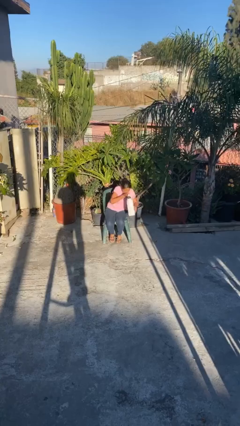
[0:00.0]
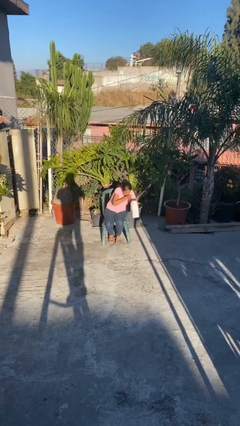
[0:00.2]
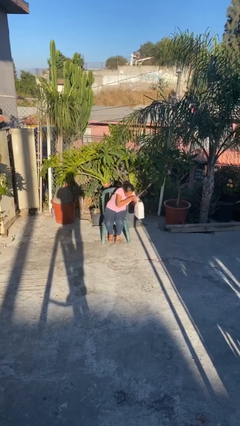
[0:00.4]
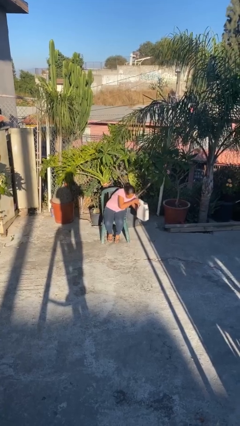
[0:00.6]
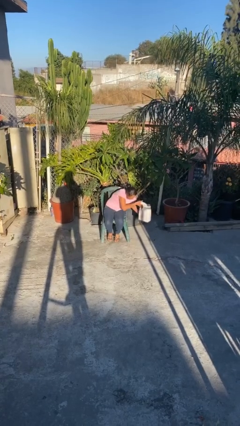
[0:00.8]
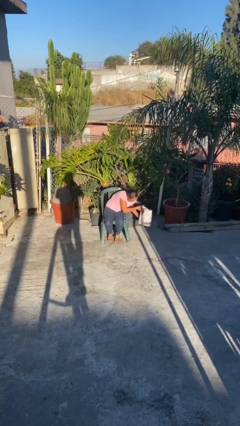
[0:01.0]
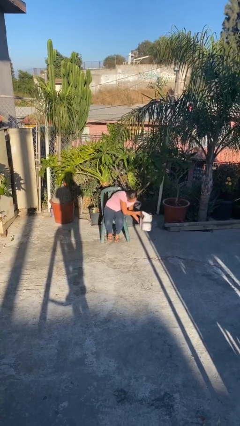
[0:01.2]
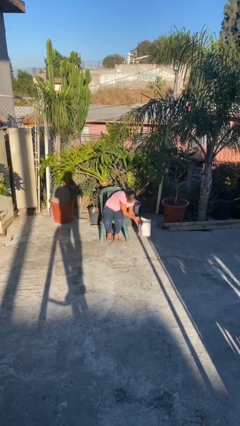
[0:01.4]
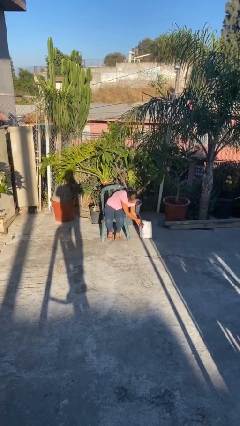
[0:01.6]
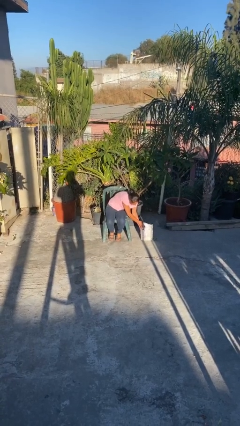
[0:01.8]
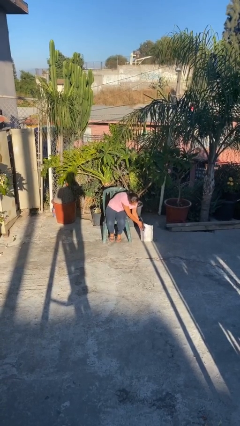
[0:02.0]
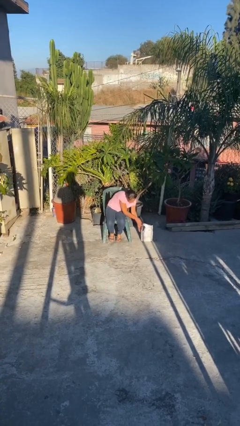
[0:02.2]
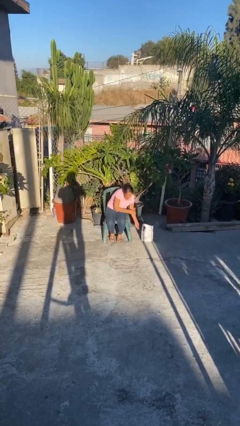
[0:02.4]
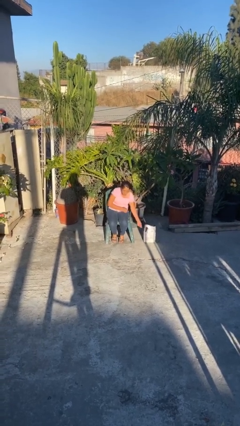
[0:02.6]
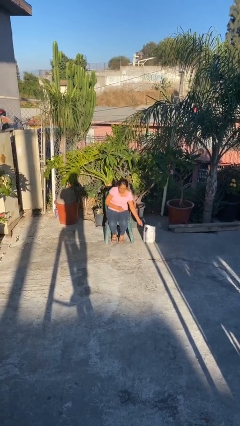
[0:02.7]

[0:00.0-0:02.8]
person puts down object on floor

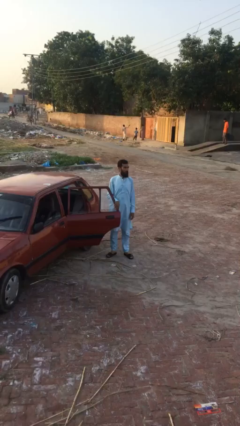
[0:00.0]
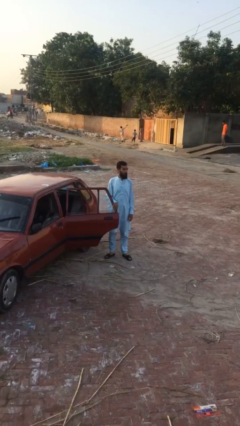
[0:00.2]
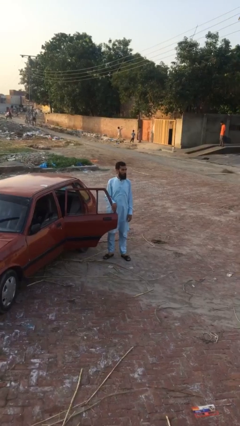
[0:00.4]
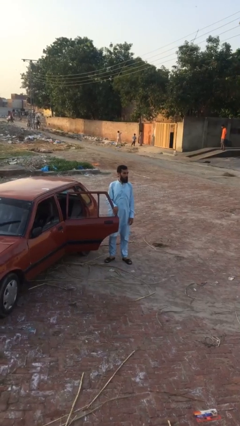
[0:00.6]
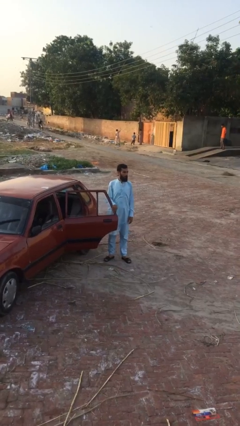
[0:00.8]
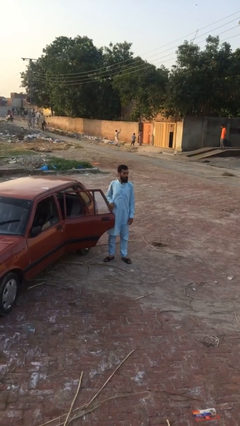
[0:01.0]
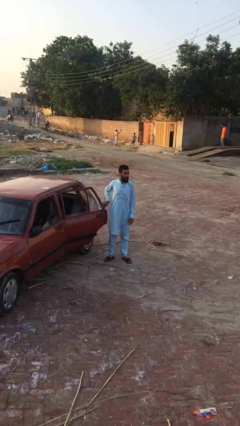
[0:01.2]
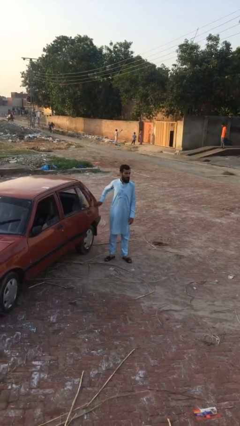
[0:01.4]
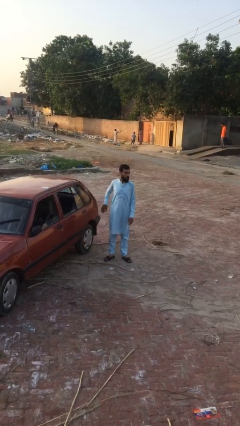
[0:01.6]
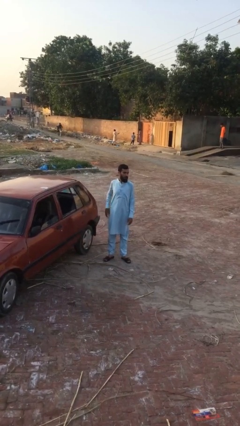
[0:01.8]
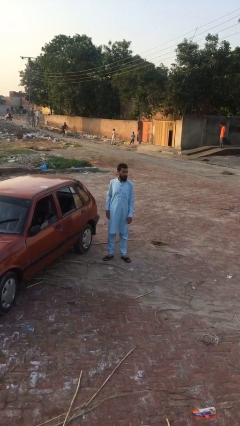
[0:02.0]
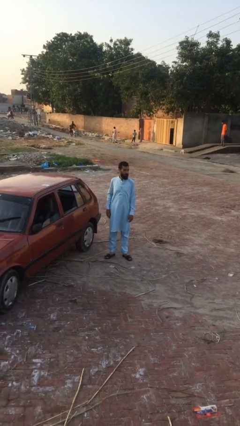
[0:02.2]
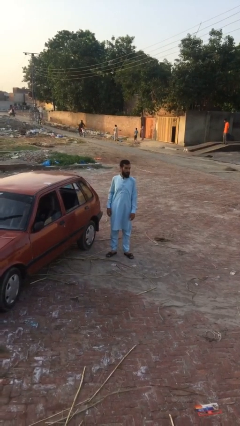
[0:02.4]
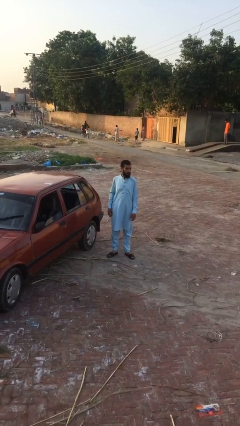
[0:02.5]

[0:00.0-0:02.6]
person closes car door

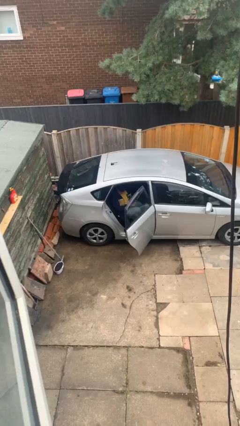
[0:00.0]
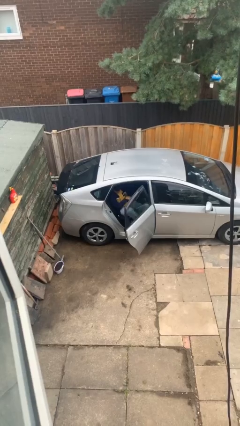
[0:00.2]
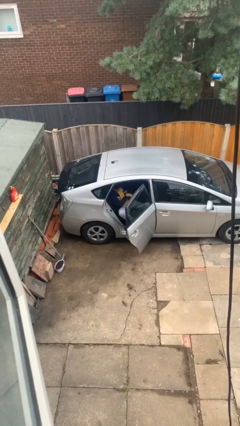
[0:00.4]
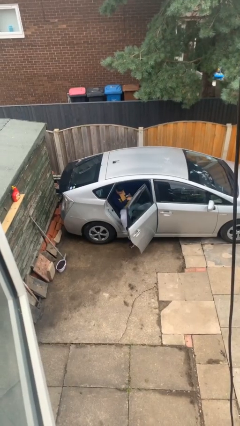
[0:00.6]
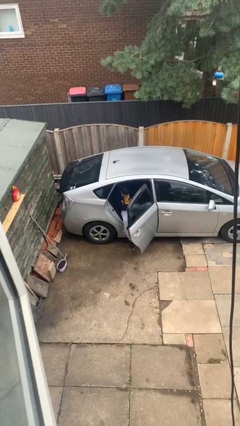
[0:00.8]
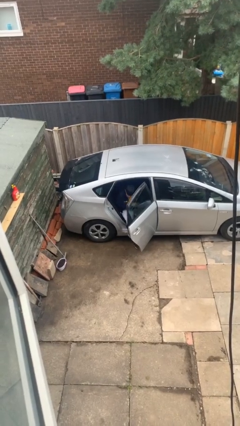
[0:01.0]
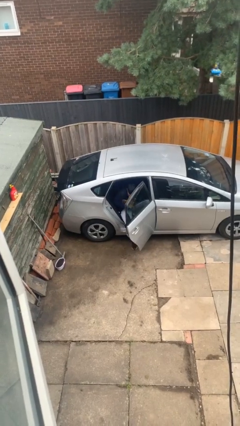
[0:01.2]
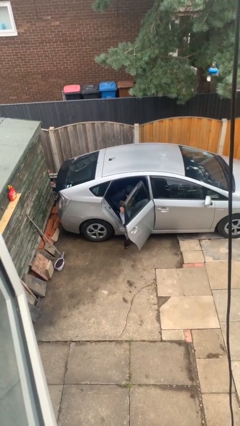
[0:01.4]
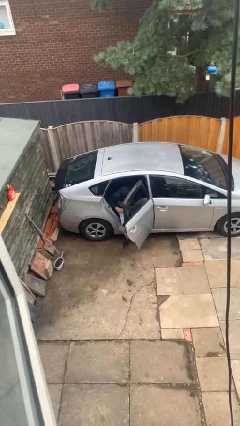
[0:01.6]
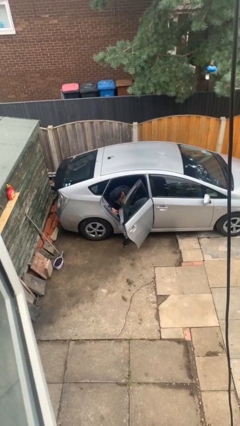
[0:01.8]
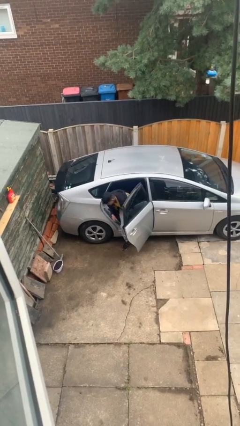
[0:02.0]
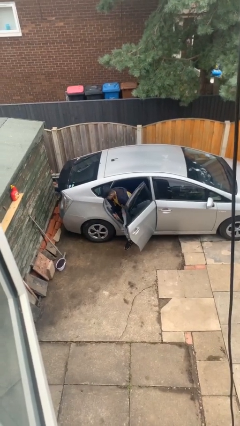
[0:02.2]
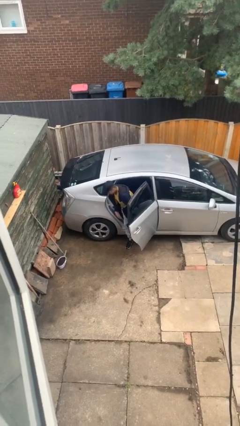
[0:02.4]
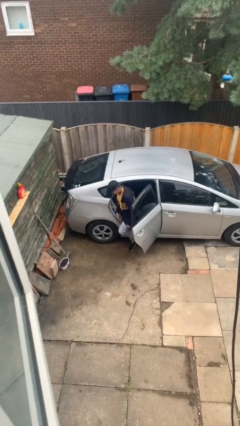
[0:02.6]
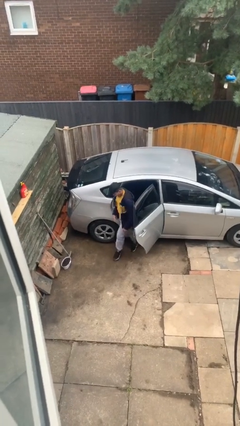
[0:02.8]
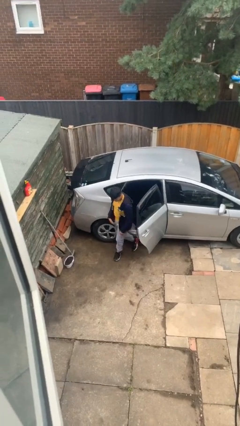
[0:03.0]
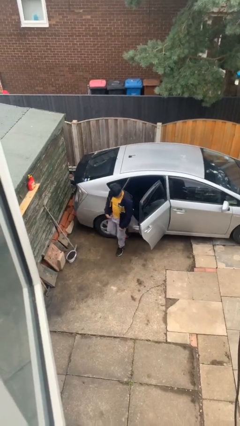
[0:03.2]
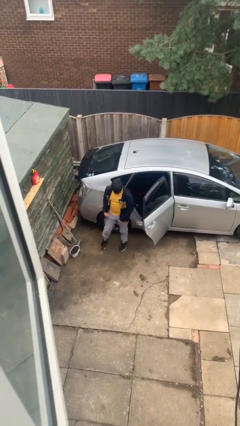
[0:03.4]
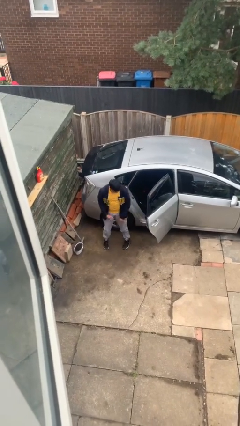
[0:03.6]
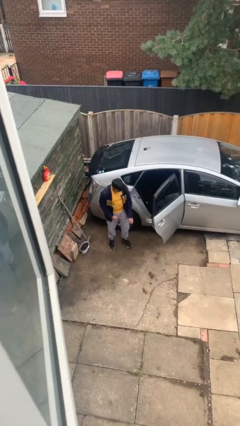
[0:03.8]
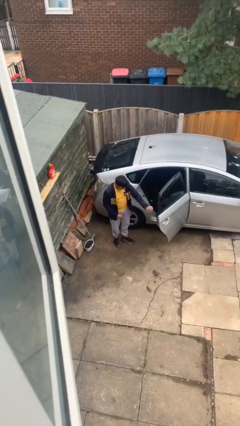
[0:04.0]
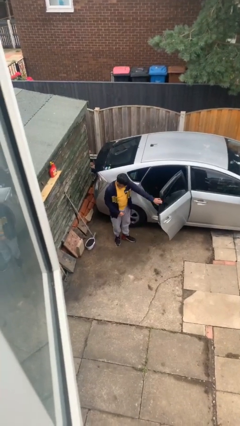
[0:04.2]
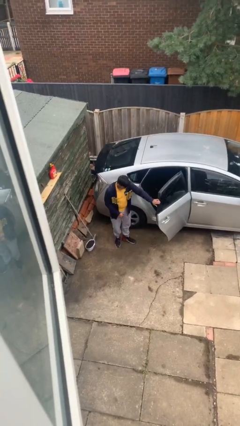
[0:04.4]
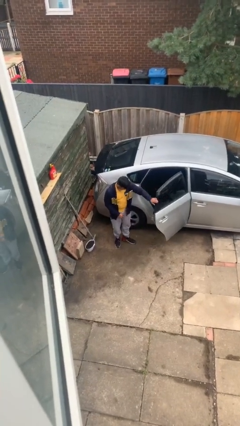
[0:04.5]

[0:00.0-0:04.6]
person exits car

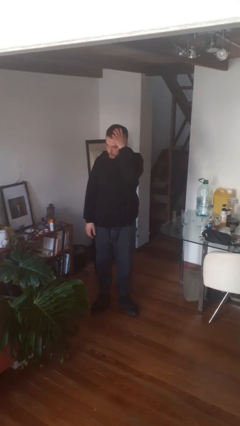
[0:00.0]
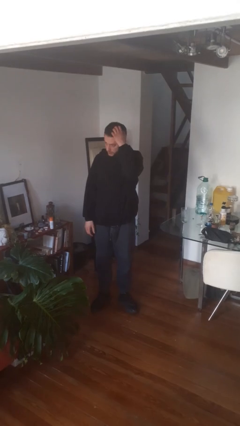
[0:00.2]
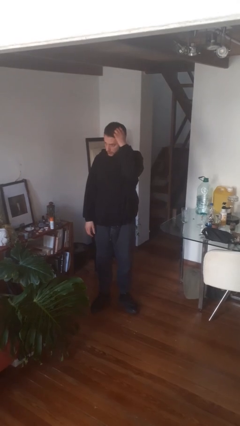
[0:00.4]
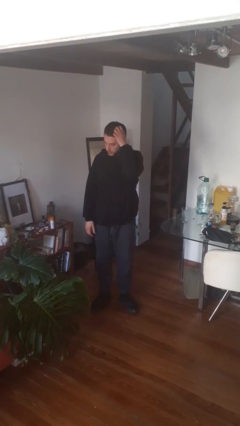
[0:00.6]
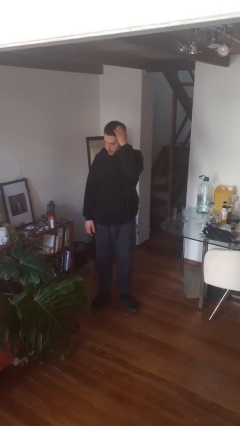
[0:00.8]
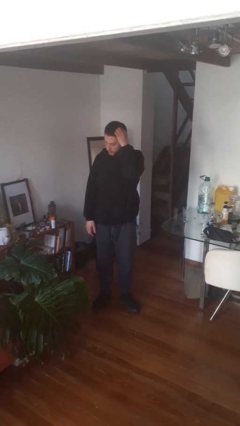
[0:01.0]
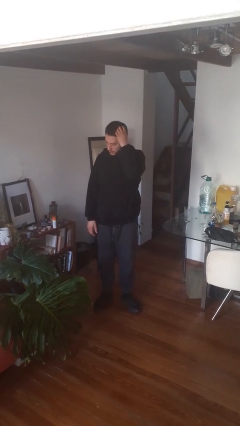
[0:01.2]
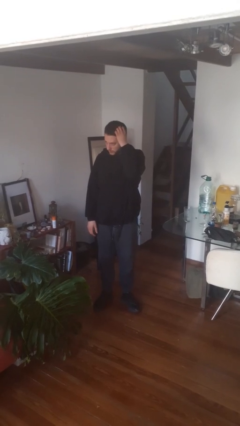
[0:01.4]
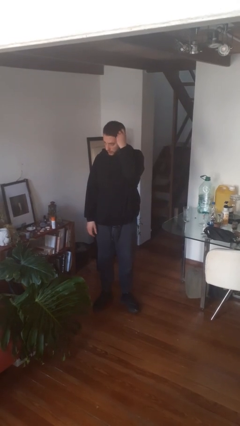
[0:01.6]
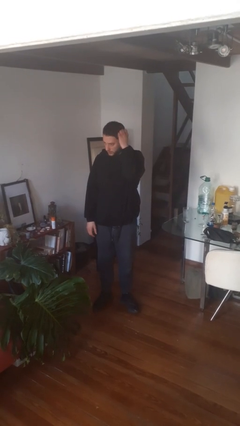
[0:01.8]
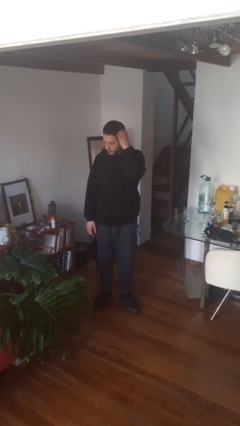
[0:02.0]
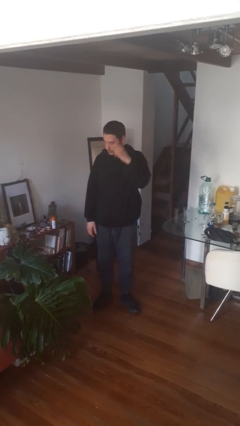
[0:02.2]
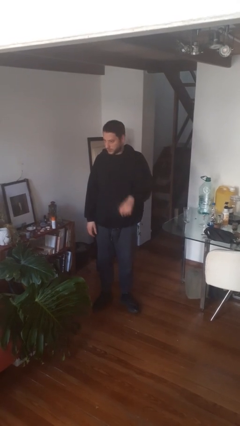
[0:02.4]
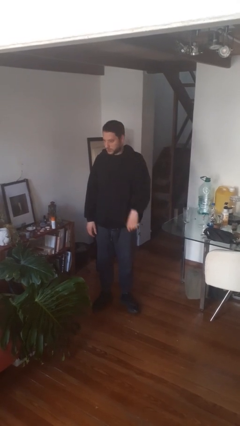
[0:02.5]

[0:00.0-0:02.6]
person scratches face

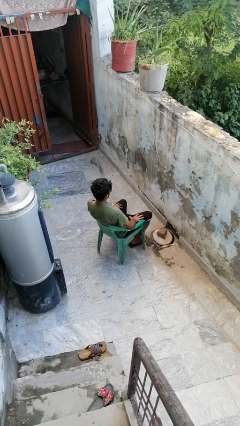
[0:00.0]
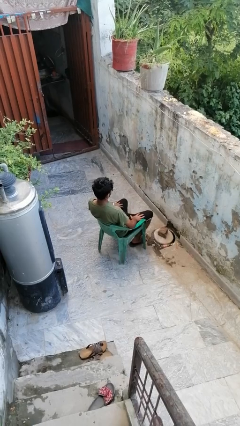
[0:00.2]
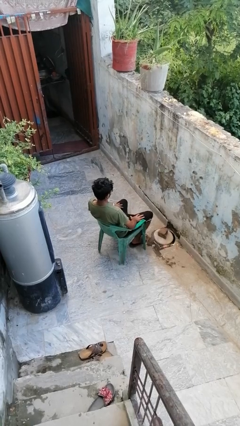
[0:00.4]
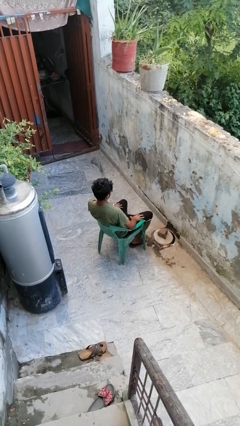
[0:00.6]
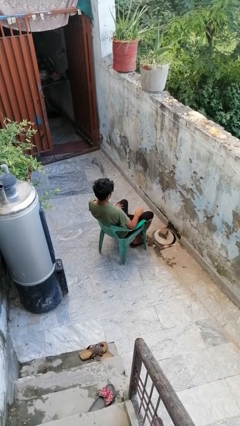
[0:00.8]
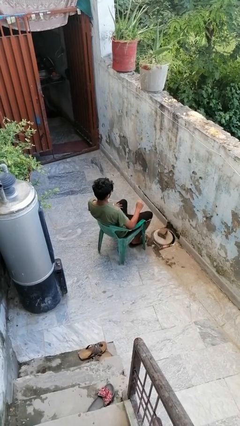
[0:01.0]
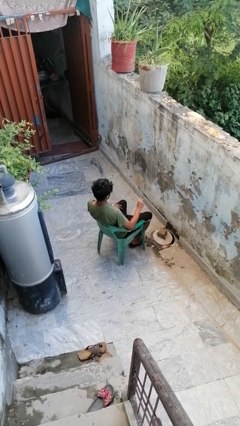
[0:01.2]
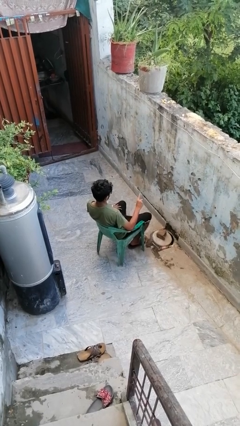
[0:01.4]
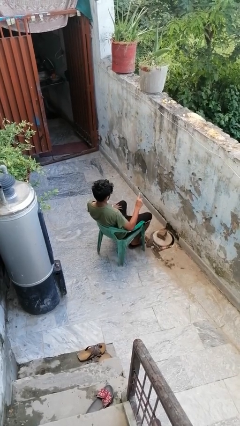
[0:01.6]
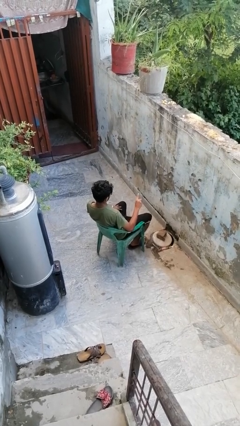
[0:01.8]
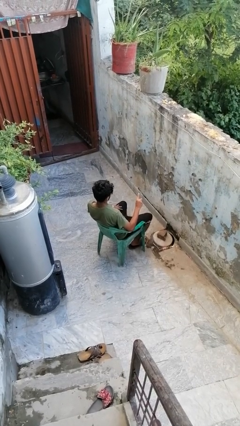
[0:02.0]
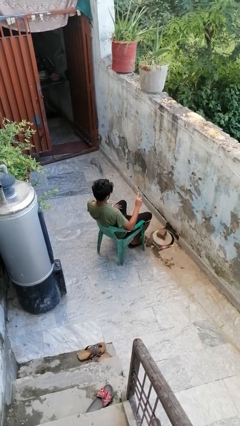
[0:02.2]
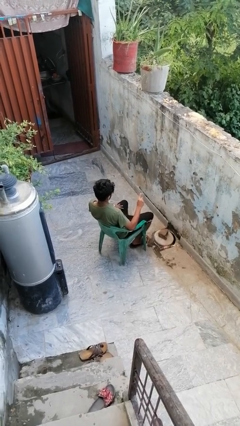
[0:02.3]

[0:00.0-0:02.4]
person gestures number one

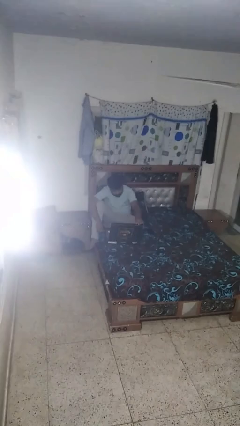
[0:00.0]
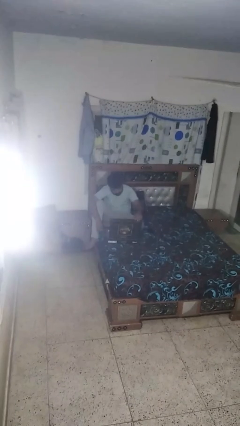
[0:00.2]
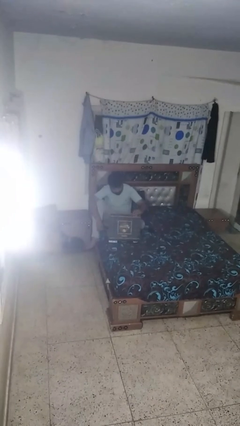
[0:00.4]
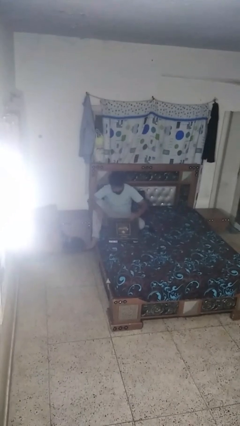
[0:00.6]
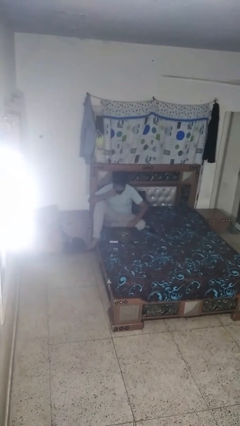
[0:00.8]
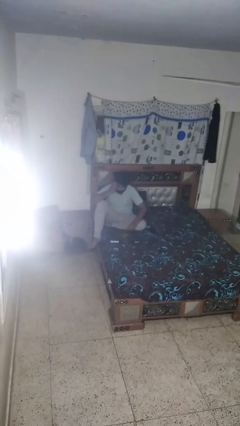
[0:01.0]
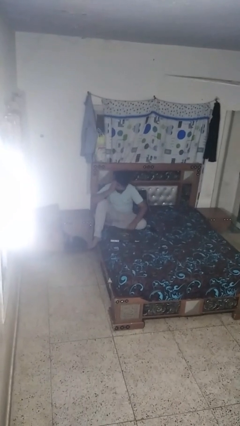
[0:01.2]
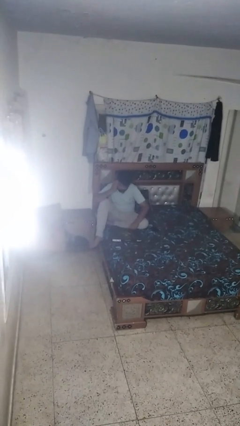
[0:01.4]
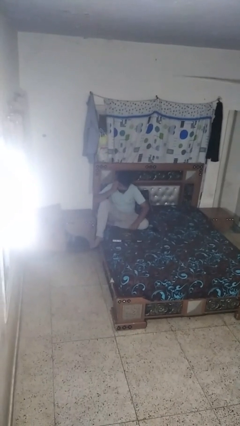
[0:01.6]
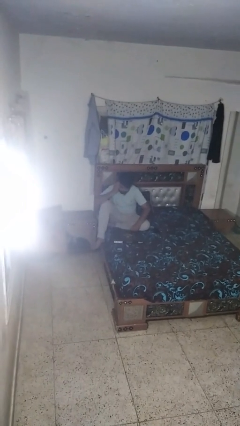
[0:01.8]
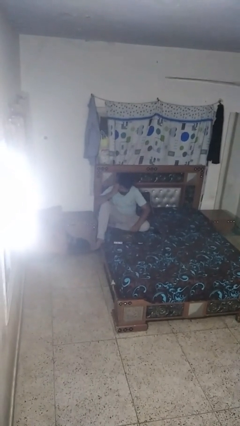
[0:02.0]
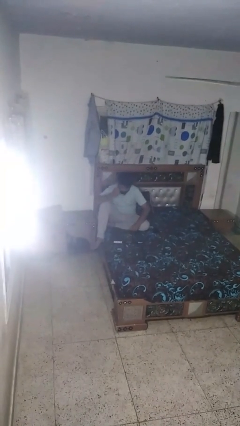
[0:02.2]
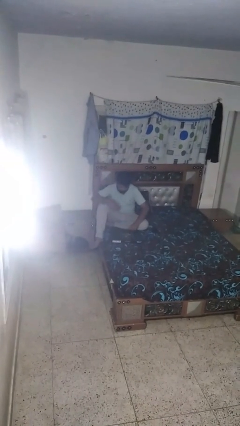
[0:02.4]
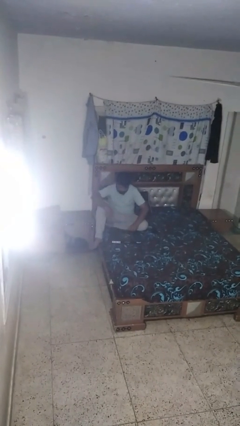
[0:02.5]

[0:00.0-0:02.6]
person closes laptop
